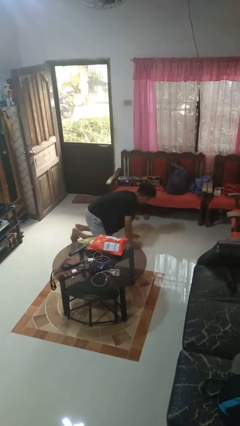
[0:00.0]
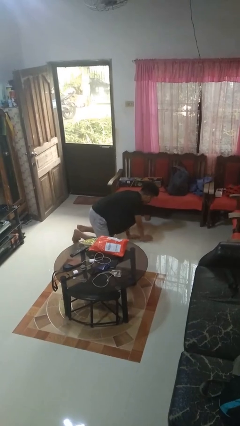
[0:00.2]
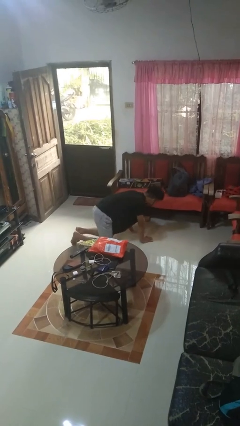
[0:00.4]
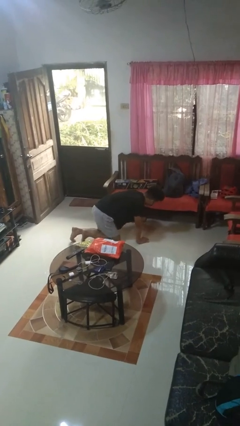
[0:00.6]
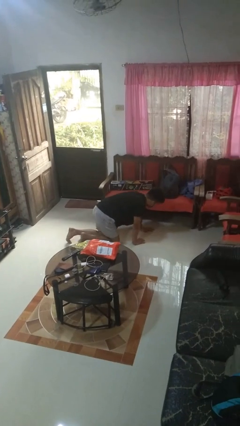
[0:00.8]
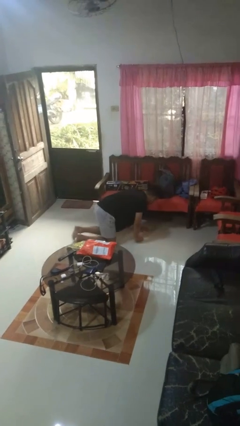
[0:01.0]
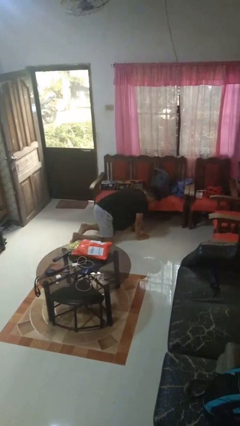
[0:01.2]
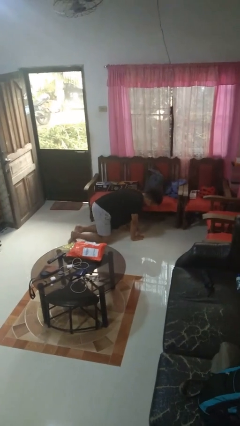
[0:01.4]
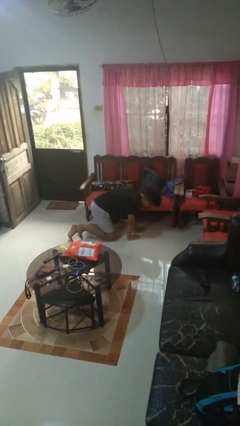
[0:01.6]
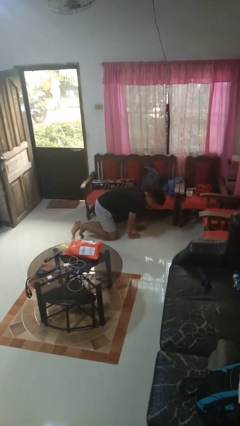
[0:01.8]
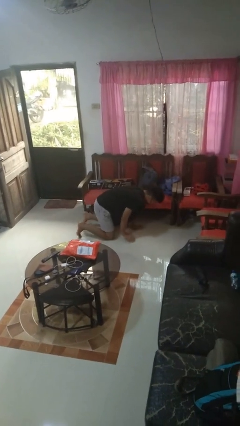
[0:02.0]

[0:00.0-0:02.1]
person crawls

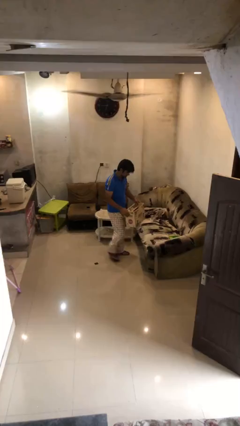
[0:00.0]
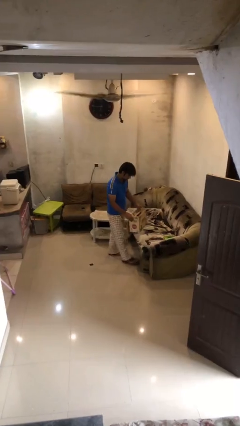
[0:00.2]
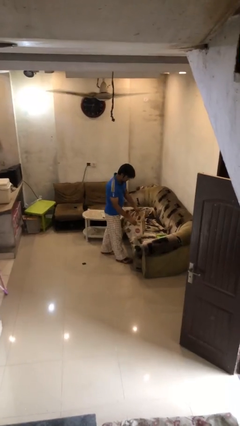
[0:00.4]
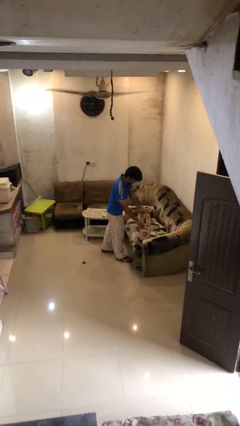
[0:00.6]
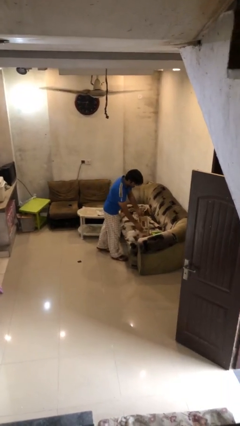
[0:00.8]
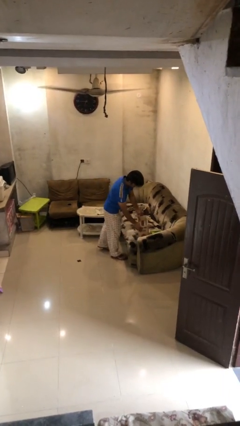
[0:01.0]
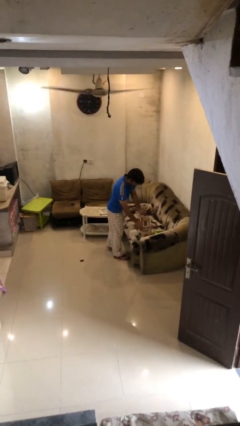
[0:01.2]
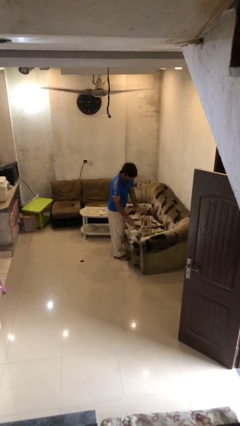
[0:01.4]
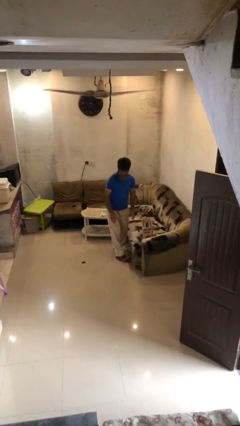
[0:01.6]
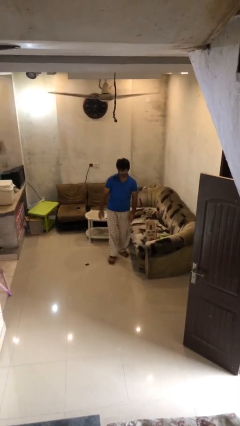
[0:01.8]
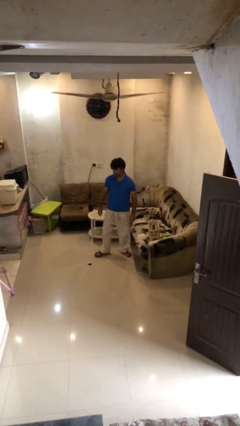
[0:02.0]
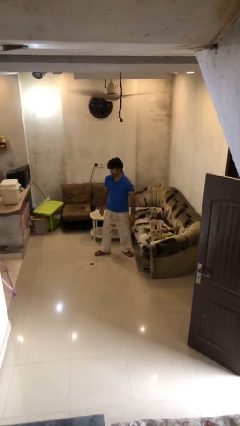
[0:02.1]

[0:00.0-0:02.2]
person puts down object on table

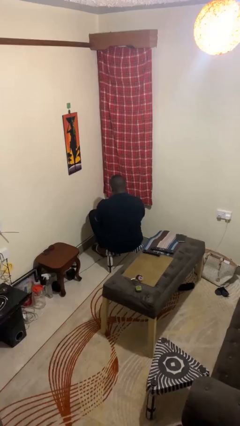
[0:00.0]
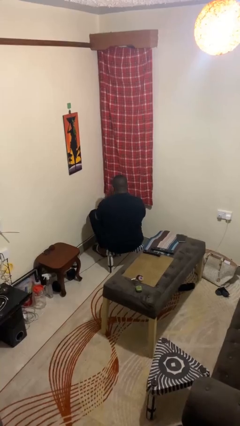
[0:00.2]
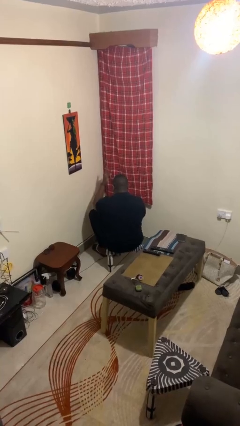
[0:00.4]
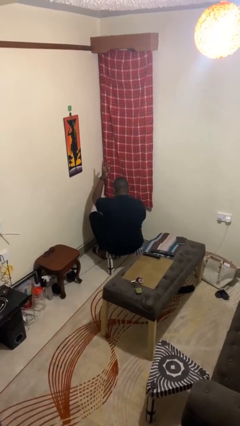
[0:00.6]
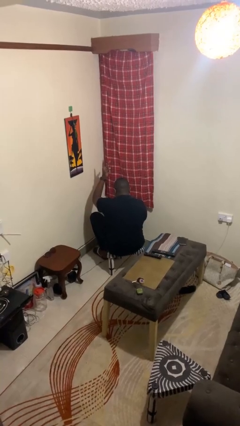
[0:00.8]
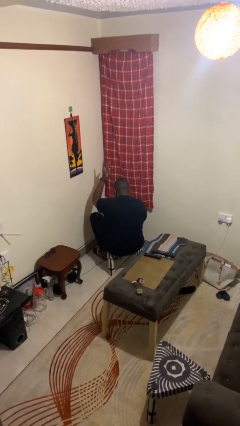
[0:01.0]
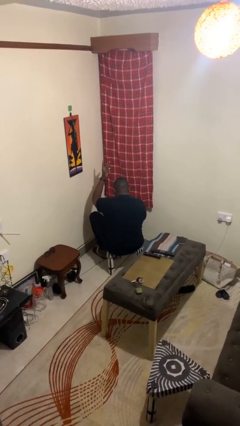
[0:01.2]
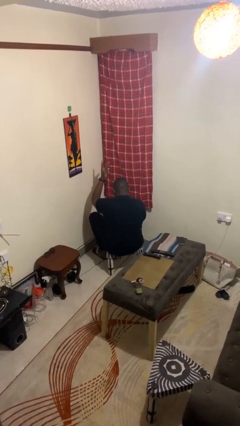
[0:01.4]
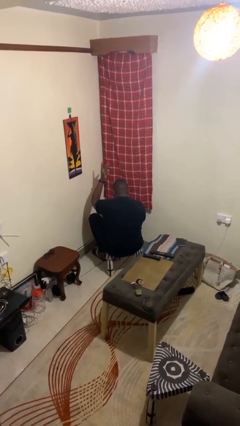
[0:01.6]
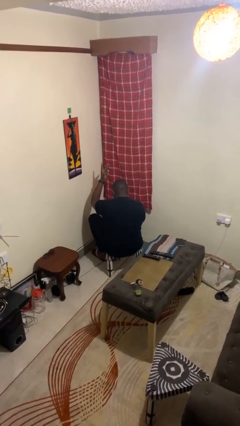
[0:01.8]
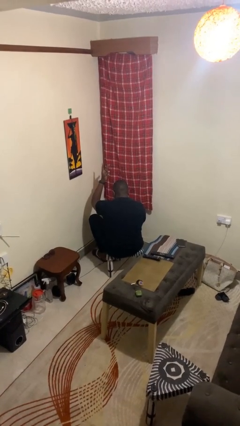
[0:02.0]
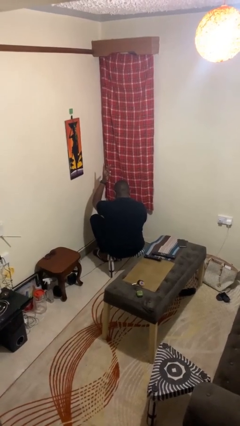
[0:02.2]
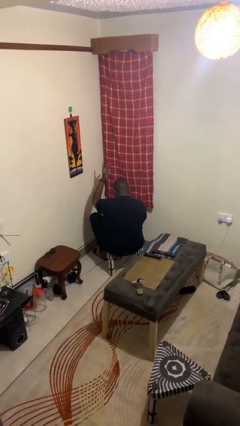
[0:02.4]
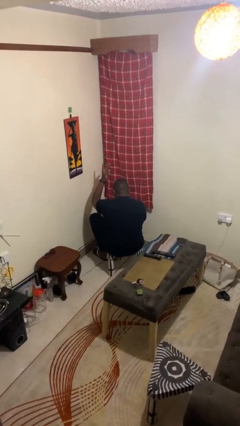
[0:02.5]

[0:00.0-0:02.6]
person gestures peace

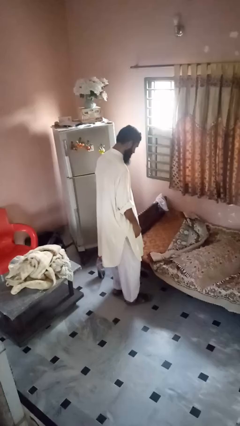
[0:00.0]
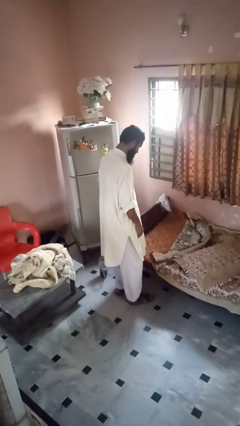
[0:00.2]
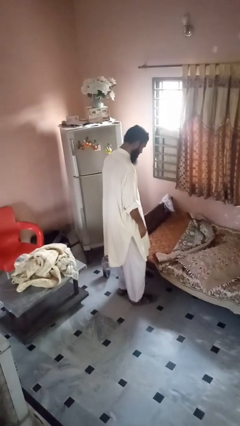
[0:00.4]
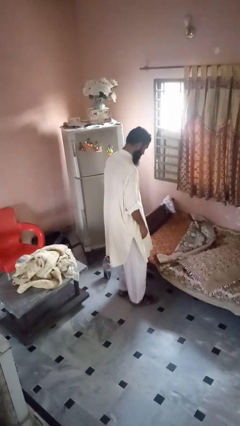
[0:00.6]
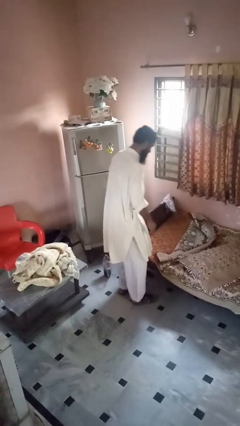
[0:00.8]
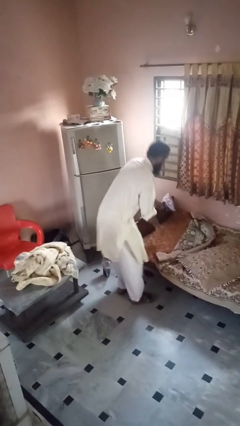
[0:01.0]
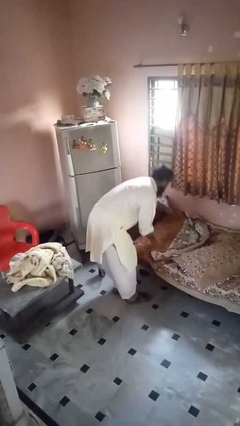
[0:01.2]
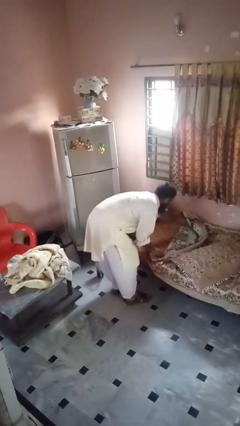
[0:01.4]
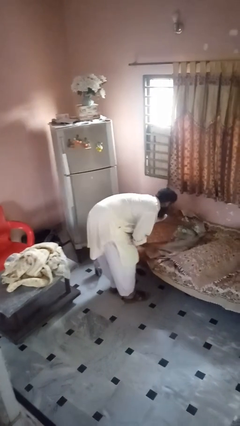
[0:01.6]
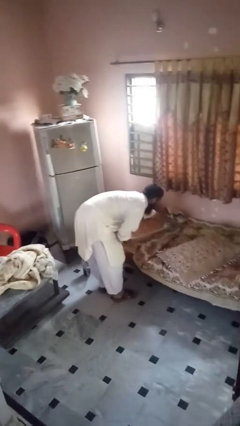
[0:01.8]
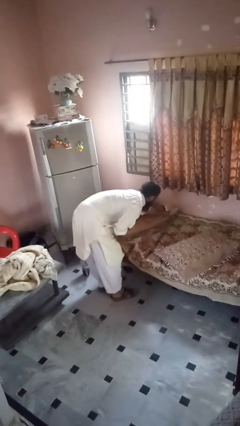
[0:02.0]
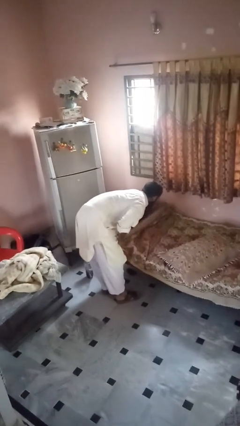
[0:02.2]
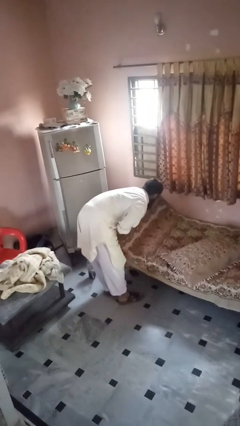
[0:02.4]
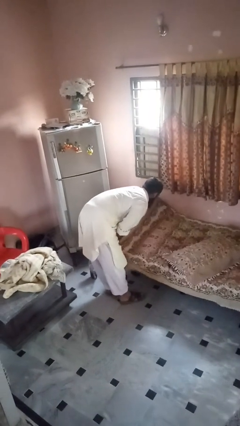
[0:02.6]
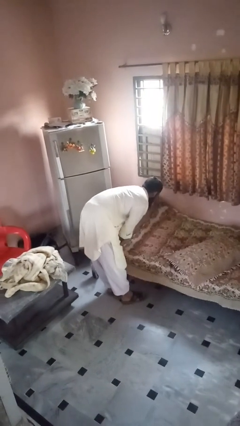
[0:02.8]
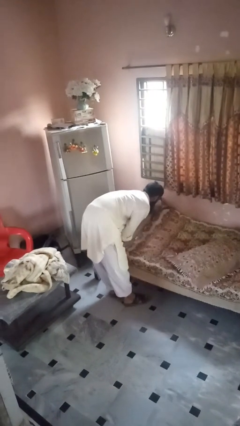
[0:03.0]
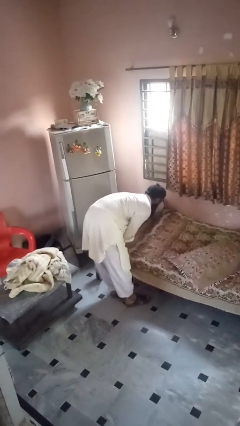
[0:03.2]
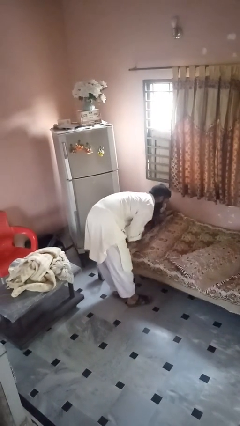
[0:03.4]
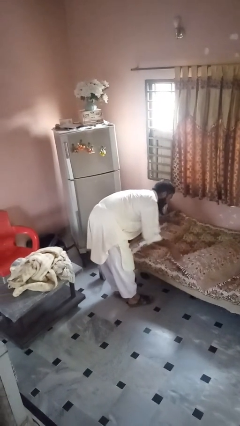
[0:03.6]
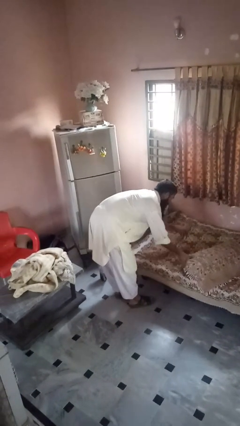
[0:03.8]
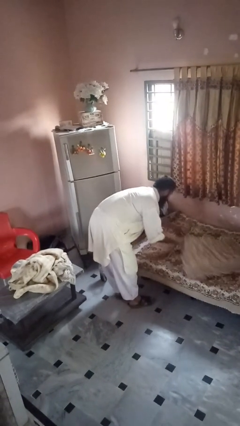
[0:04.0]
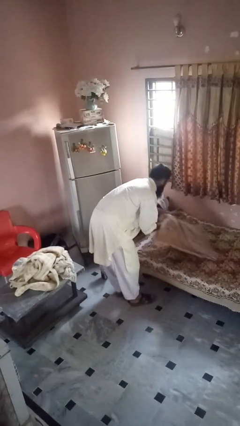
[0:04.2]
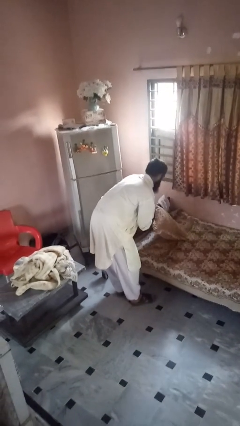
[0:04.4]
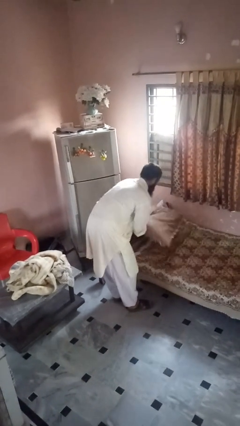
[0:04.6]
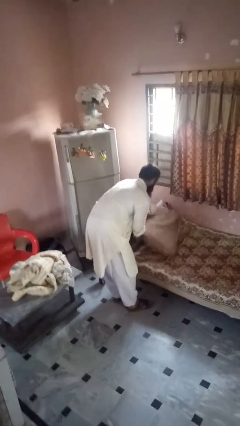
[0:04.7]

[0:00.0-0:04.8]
person covers with bedsheets

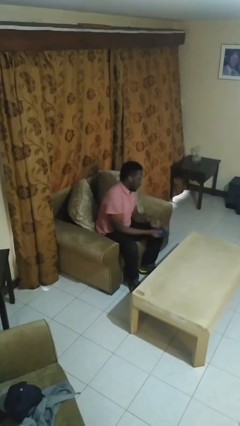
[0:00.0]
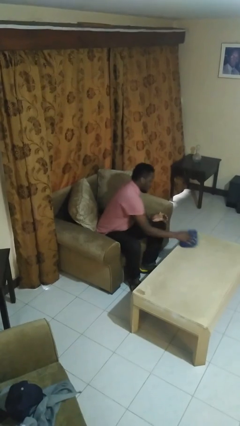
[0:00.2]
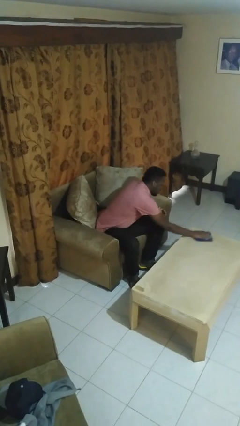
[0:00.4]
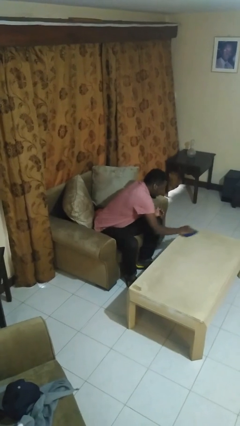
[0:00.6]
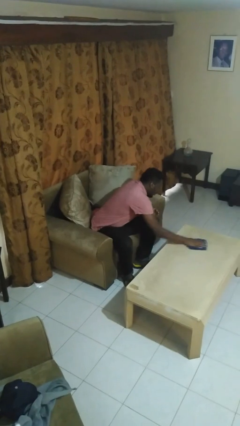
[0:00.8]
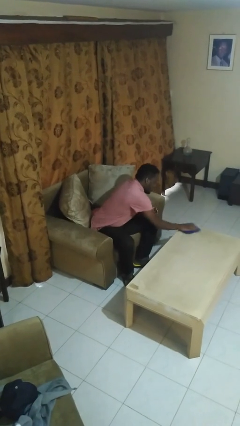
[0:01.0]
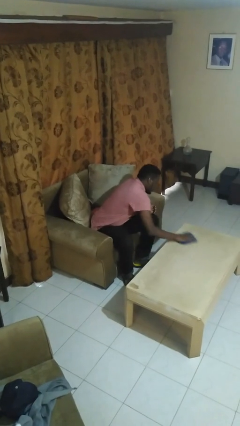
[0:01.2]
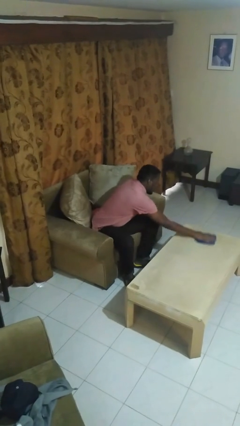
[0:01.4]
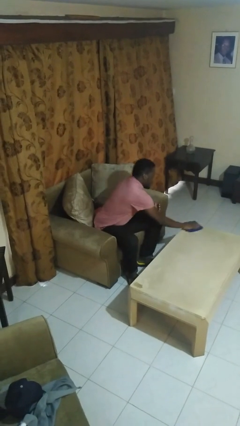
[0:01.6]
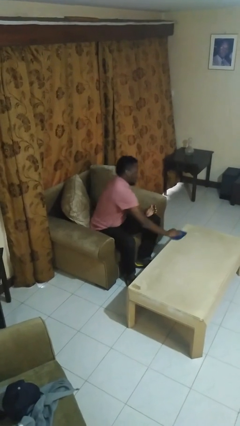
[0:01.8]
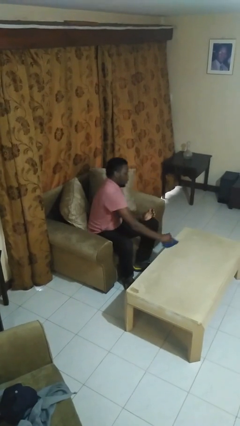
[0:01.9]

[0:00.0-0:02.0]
person cleans table with rag

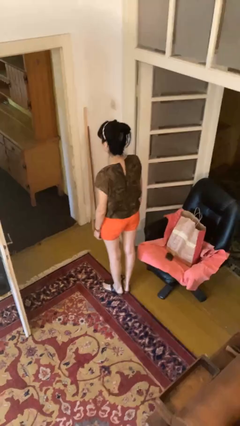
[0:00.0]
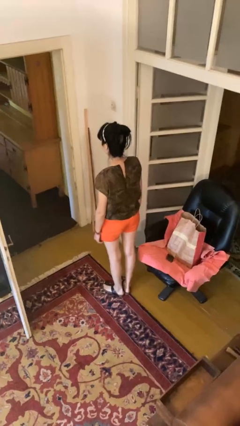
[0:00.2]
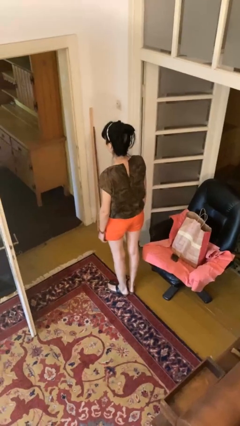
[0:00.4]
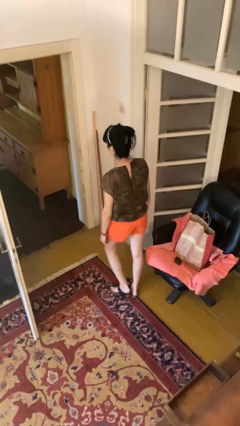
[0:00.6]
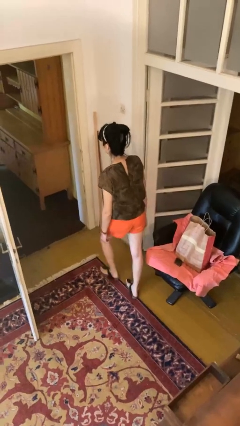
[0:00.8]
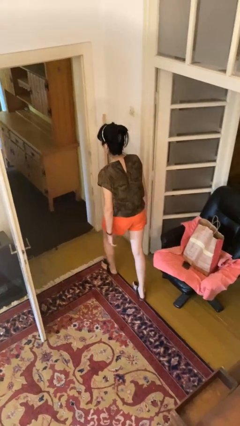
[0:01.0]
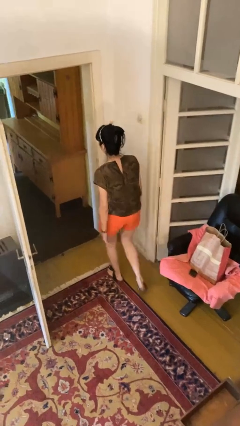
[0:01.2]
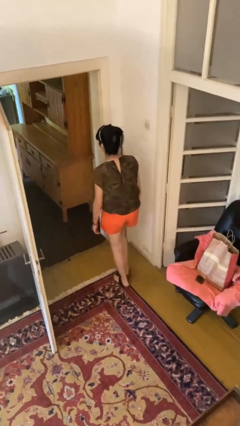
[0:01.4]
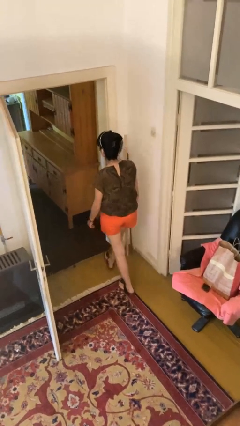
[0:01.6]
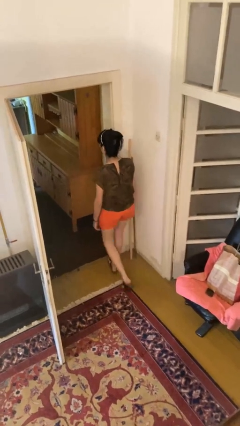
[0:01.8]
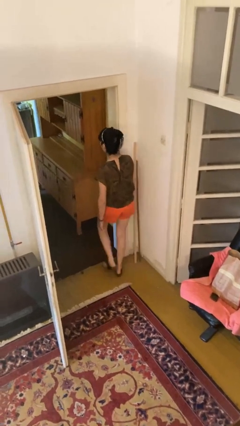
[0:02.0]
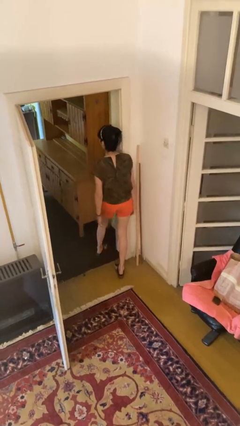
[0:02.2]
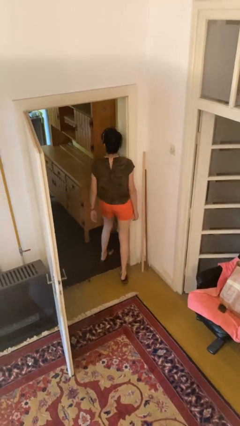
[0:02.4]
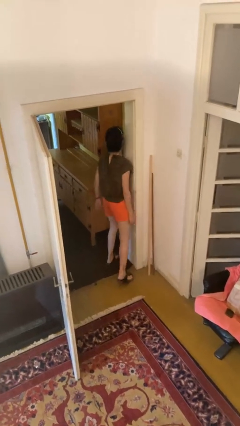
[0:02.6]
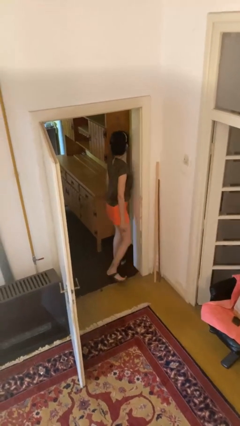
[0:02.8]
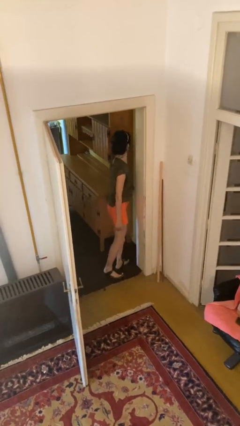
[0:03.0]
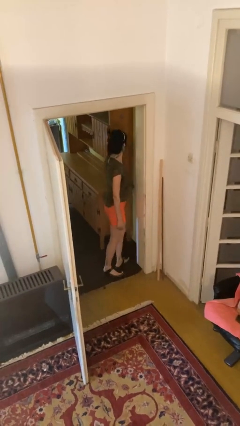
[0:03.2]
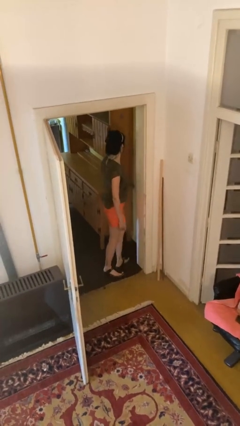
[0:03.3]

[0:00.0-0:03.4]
person bumps into wall

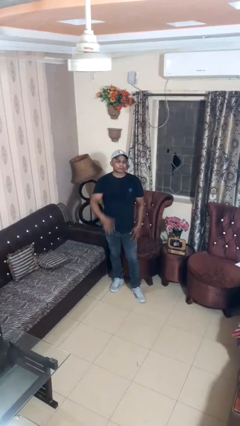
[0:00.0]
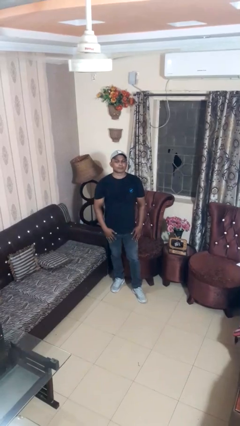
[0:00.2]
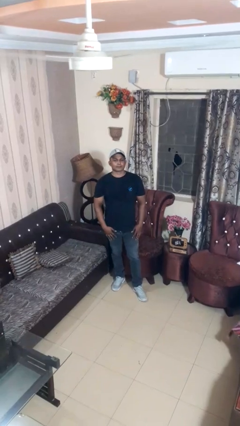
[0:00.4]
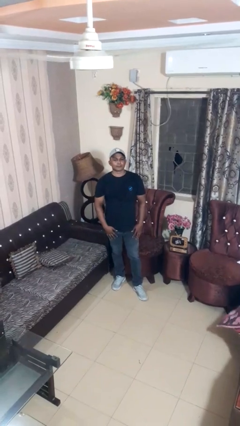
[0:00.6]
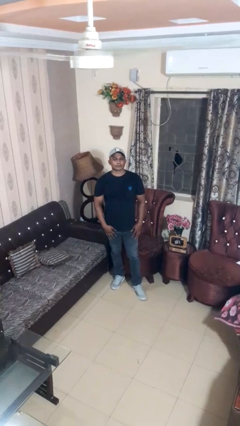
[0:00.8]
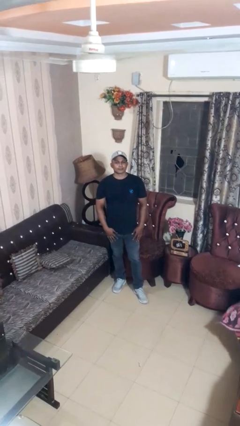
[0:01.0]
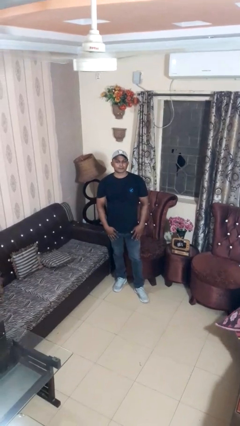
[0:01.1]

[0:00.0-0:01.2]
person gestures swipe down
